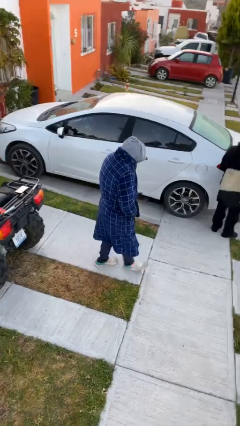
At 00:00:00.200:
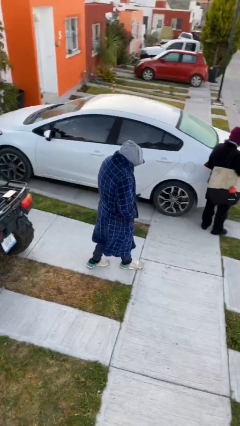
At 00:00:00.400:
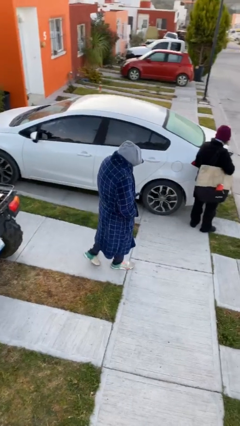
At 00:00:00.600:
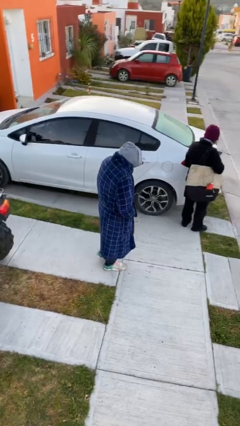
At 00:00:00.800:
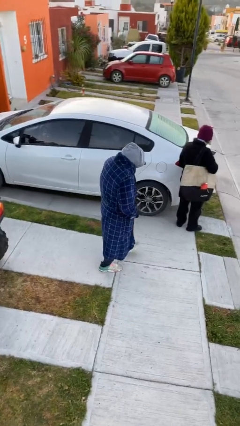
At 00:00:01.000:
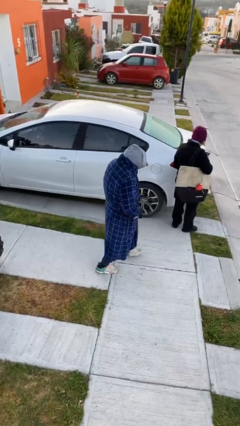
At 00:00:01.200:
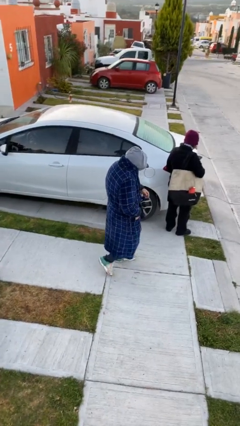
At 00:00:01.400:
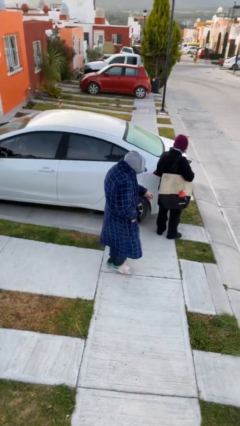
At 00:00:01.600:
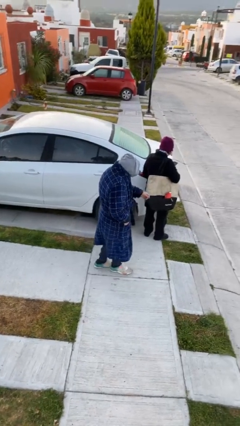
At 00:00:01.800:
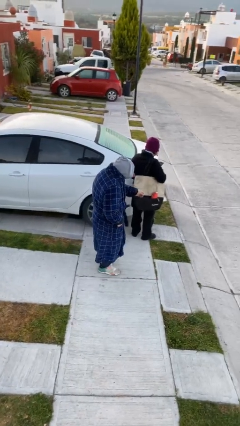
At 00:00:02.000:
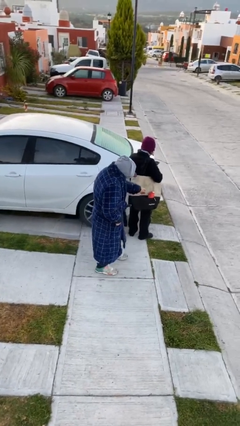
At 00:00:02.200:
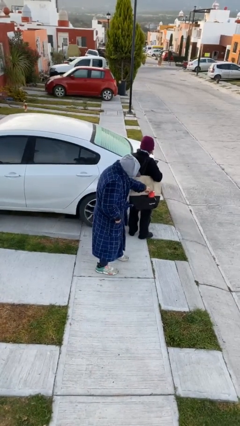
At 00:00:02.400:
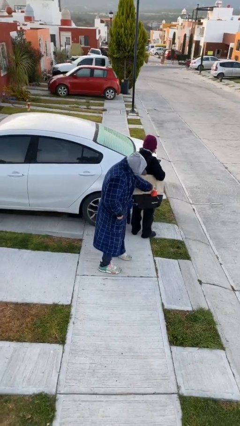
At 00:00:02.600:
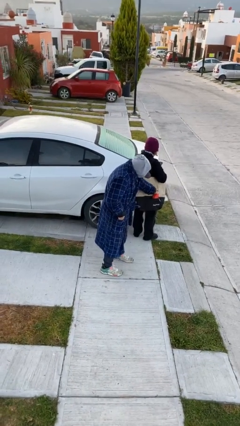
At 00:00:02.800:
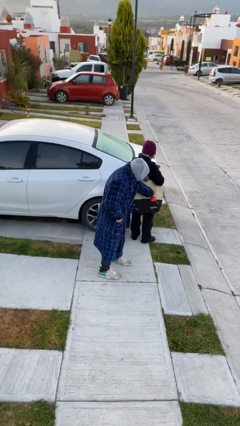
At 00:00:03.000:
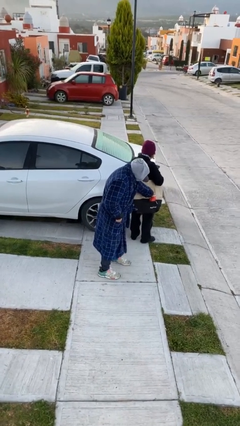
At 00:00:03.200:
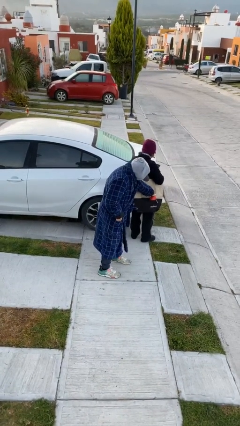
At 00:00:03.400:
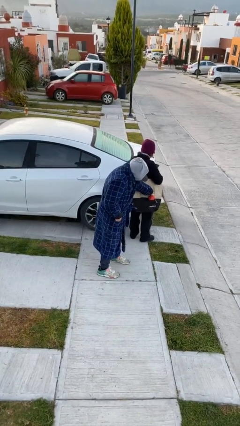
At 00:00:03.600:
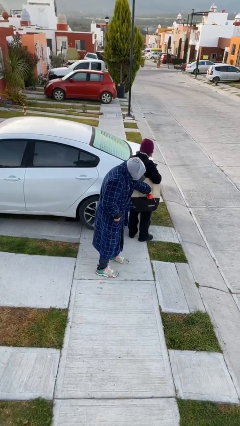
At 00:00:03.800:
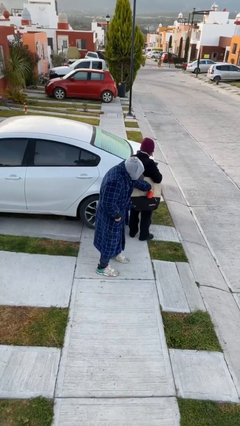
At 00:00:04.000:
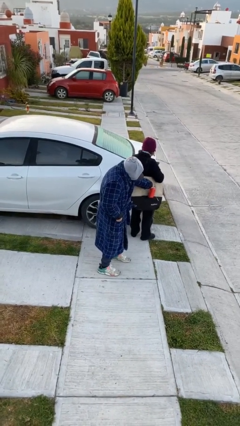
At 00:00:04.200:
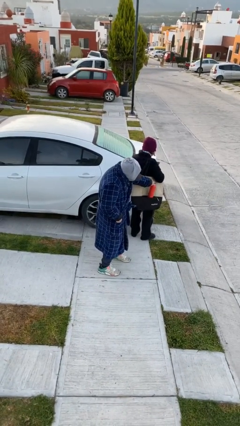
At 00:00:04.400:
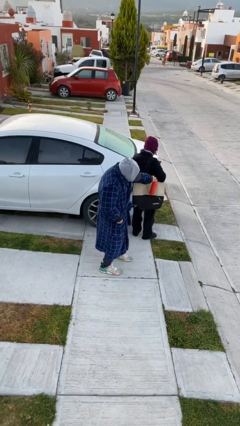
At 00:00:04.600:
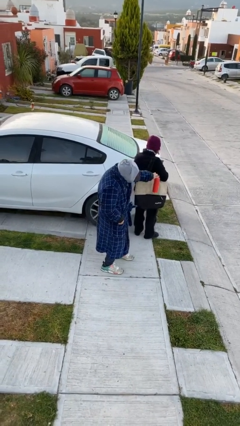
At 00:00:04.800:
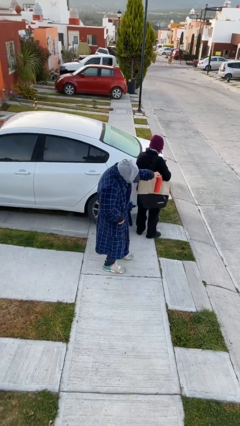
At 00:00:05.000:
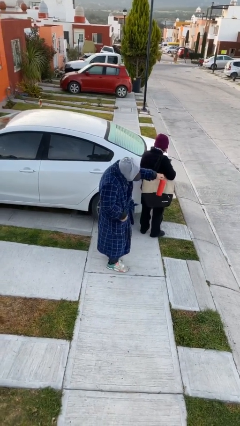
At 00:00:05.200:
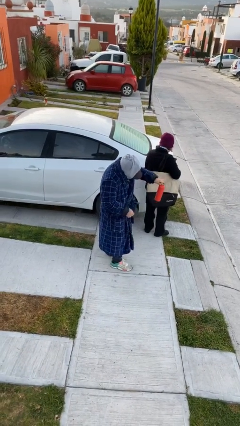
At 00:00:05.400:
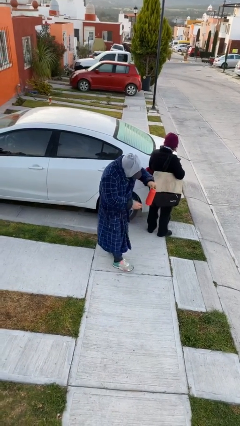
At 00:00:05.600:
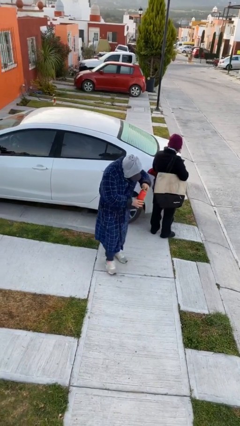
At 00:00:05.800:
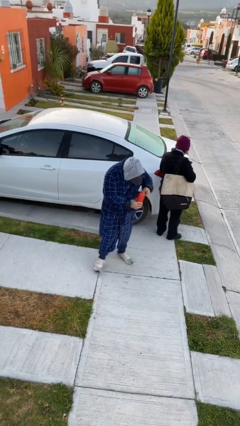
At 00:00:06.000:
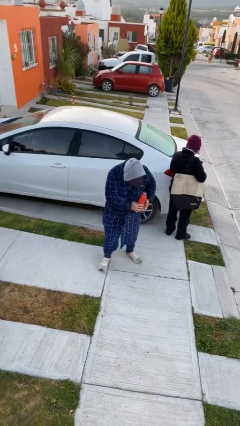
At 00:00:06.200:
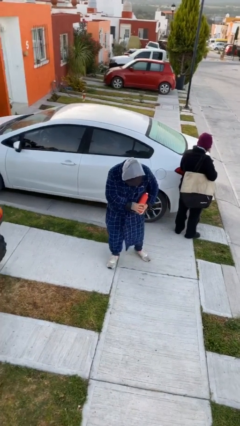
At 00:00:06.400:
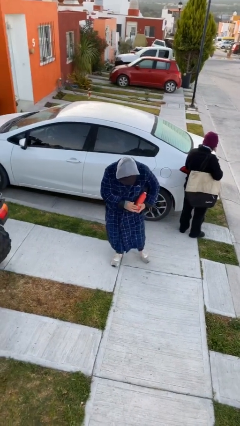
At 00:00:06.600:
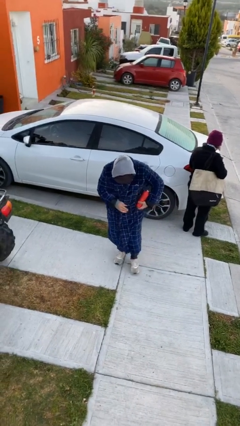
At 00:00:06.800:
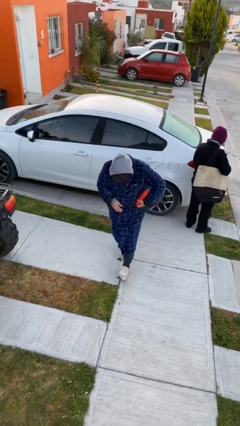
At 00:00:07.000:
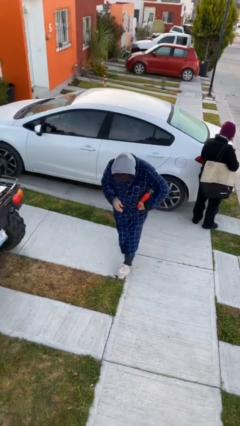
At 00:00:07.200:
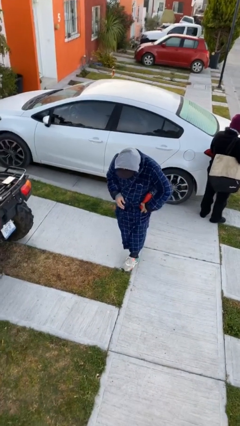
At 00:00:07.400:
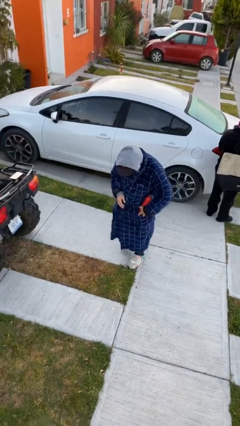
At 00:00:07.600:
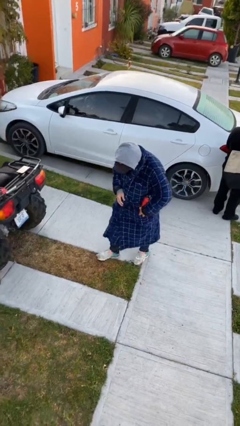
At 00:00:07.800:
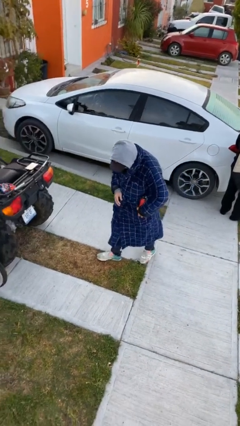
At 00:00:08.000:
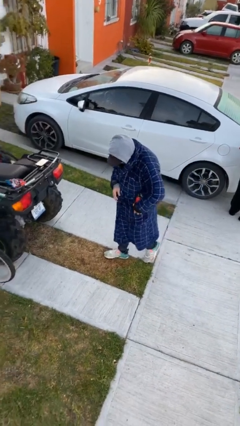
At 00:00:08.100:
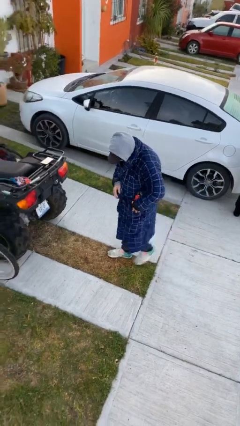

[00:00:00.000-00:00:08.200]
person steals object from person

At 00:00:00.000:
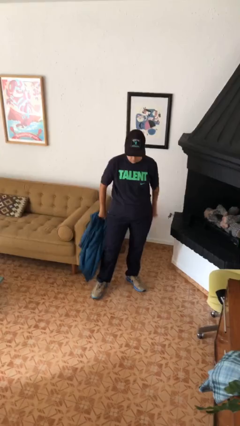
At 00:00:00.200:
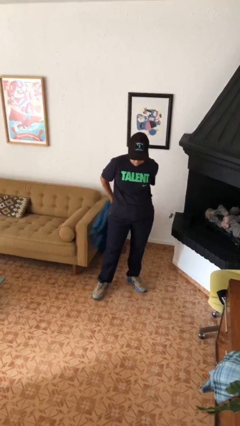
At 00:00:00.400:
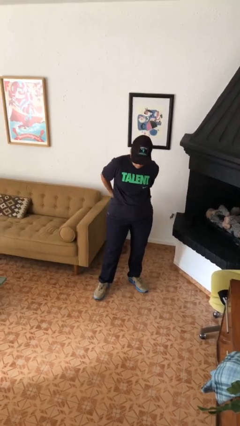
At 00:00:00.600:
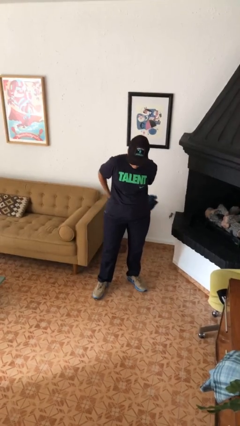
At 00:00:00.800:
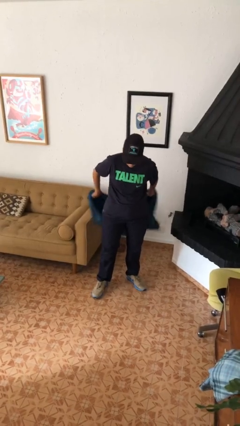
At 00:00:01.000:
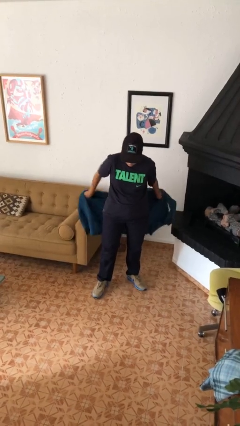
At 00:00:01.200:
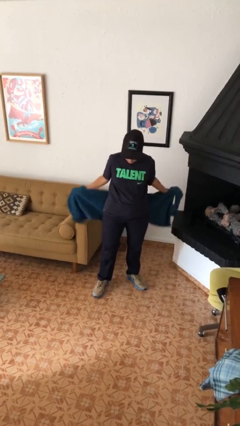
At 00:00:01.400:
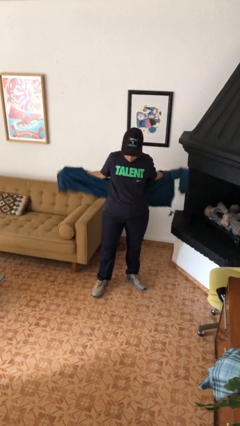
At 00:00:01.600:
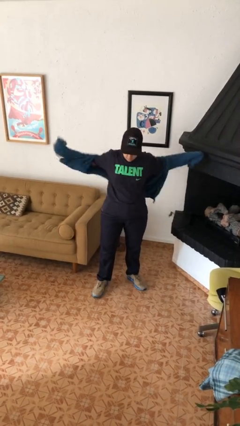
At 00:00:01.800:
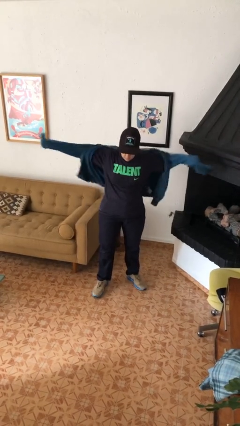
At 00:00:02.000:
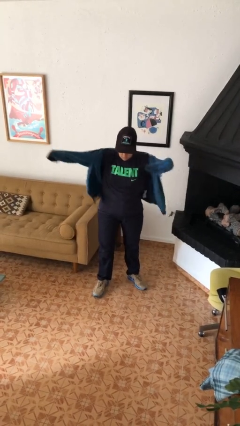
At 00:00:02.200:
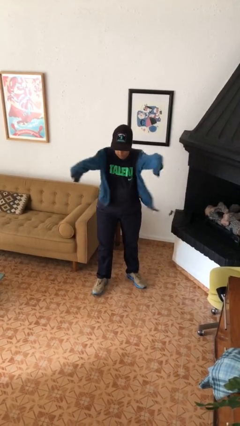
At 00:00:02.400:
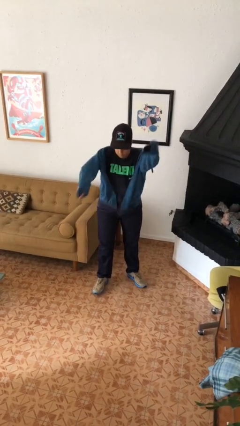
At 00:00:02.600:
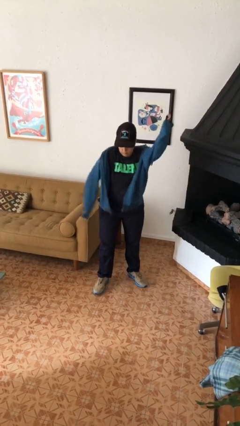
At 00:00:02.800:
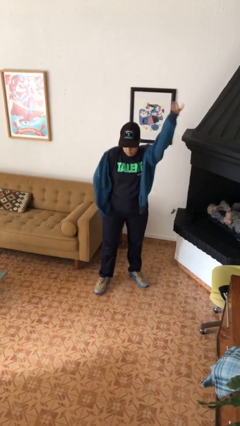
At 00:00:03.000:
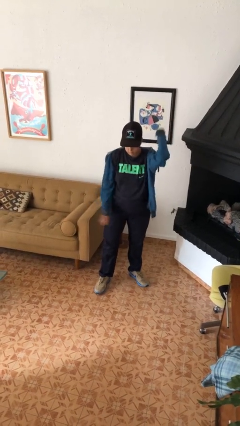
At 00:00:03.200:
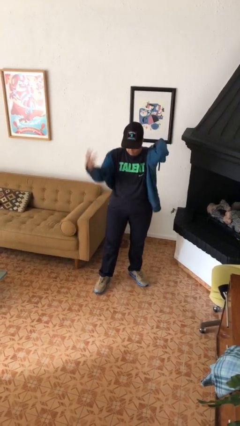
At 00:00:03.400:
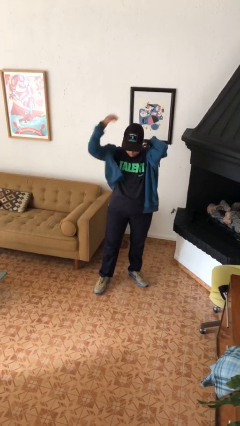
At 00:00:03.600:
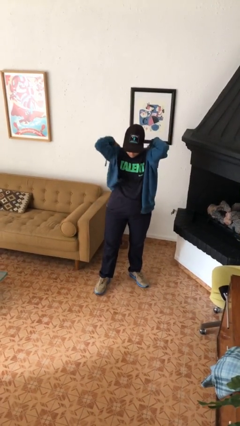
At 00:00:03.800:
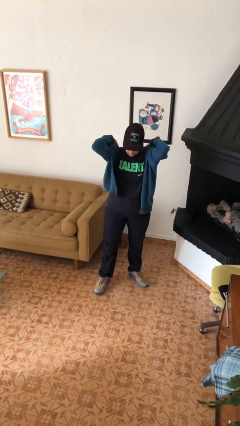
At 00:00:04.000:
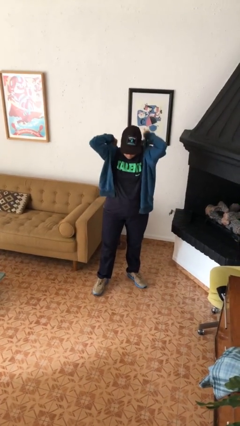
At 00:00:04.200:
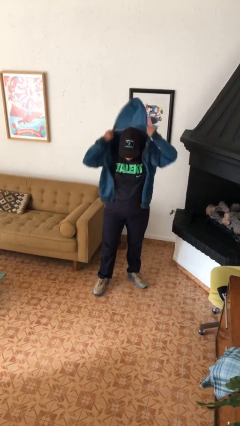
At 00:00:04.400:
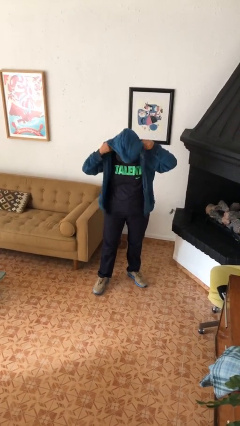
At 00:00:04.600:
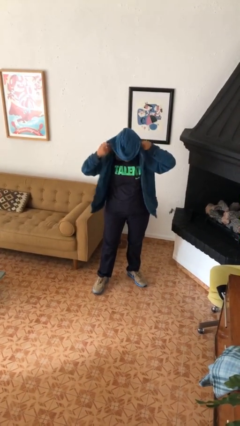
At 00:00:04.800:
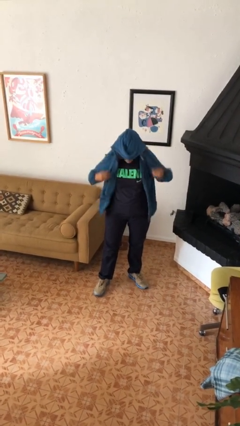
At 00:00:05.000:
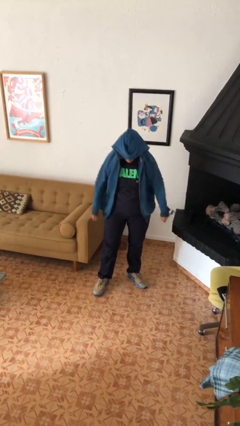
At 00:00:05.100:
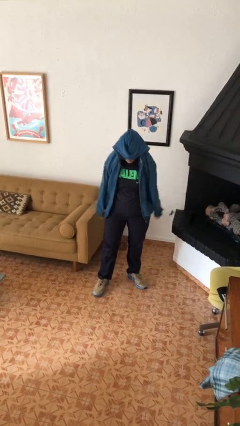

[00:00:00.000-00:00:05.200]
person puts on hoodie

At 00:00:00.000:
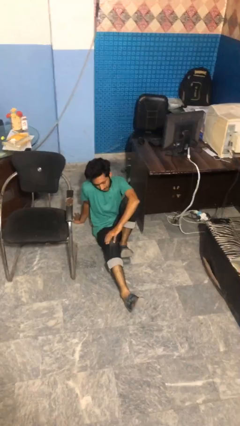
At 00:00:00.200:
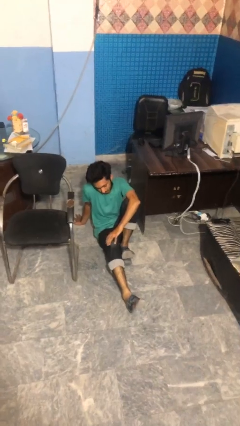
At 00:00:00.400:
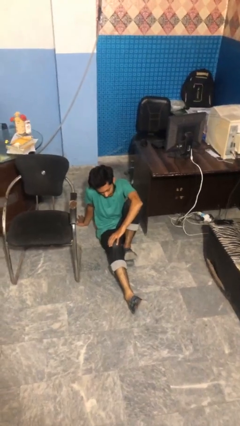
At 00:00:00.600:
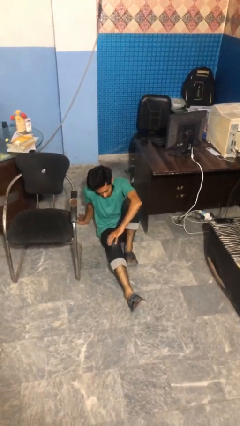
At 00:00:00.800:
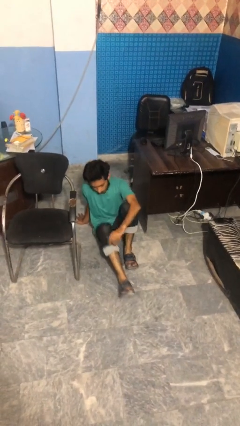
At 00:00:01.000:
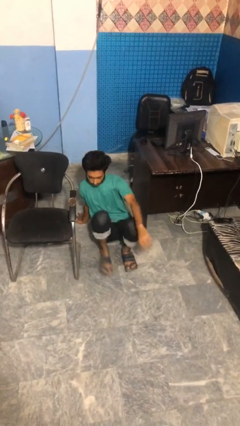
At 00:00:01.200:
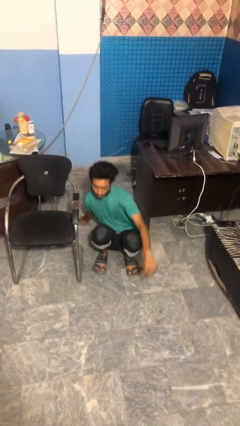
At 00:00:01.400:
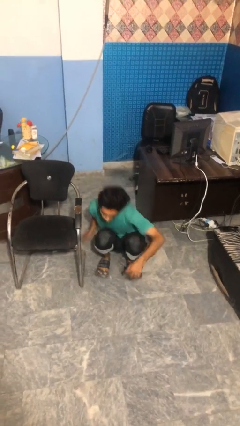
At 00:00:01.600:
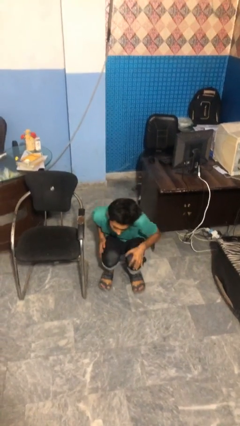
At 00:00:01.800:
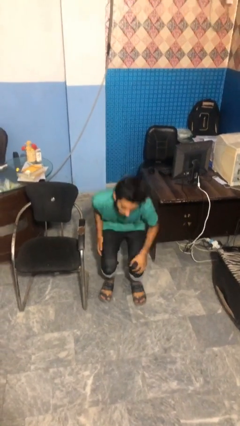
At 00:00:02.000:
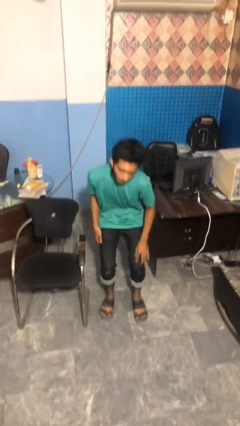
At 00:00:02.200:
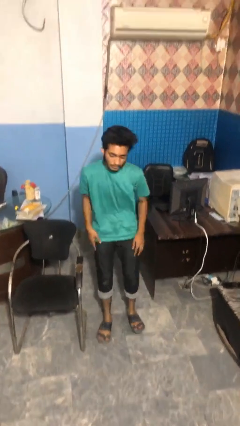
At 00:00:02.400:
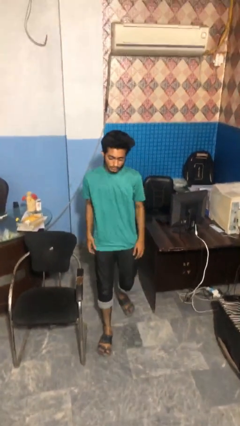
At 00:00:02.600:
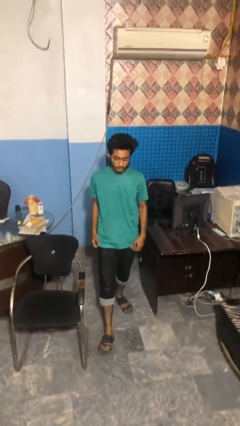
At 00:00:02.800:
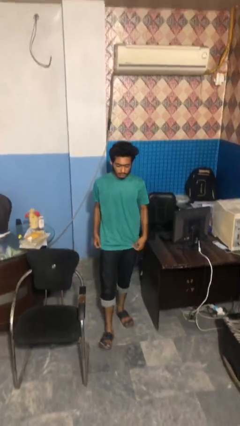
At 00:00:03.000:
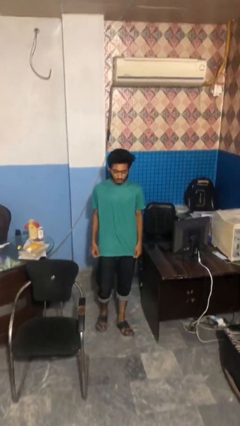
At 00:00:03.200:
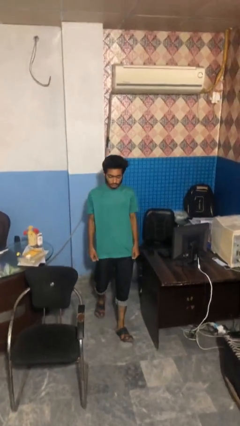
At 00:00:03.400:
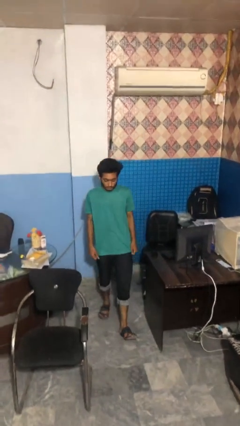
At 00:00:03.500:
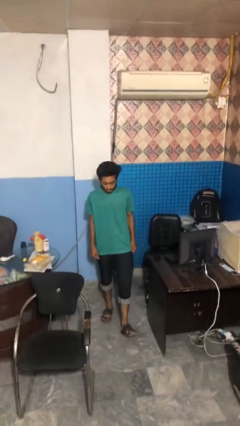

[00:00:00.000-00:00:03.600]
person stands up from floor

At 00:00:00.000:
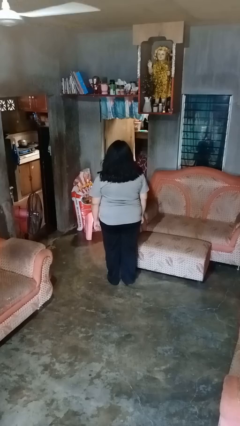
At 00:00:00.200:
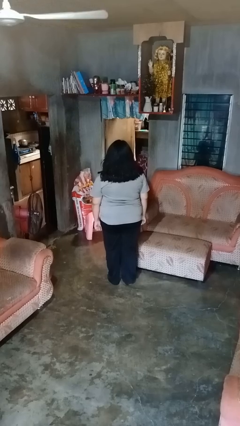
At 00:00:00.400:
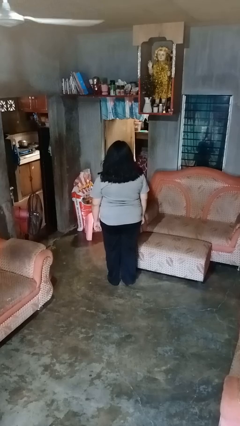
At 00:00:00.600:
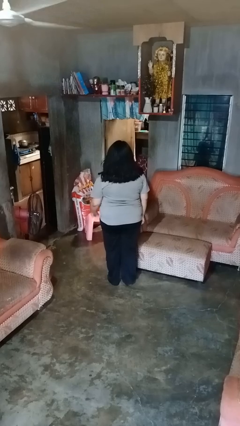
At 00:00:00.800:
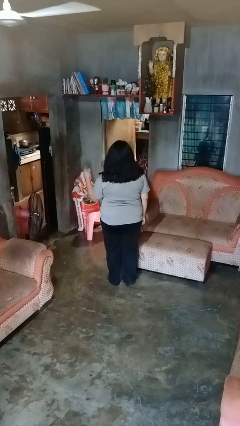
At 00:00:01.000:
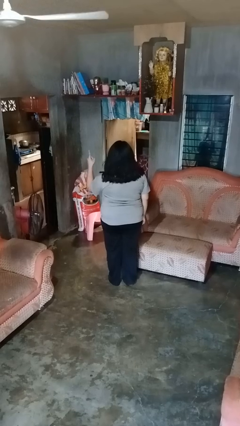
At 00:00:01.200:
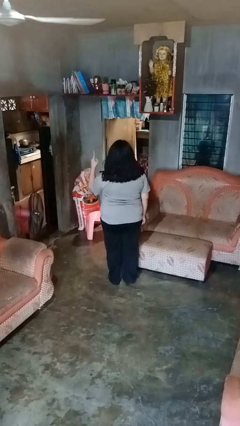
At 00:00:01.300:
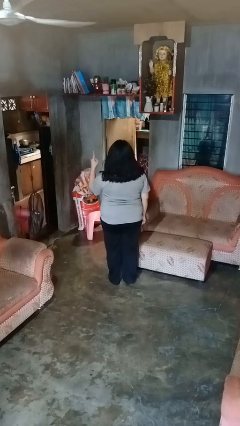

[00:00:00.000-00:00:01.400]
person gestures number one
